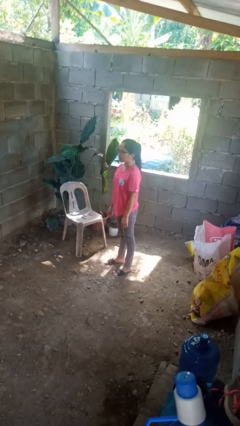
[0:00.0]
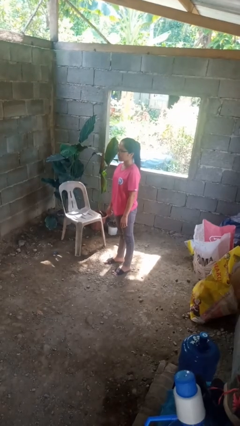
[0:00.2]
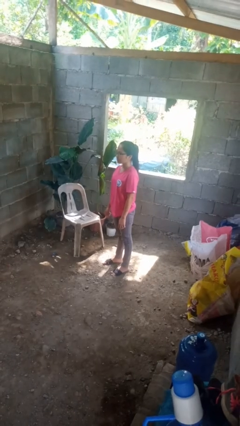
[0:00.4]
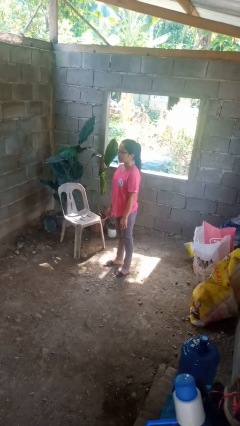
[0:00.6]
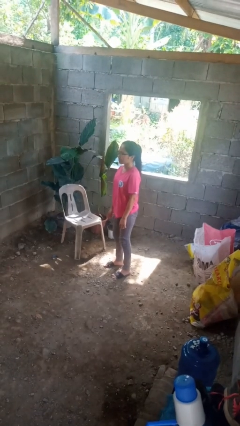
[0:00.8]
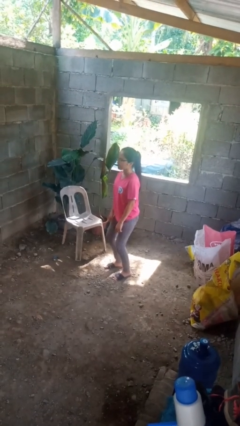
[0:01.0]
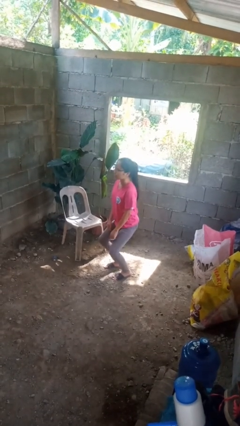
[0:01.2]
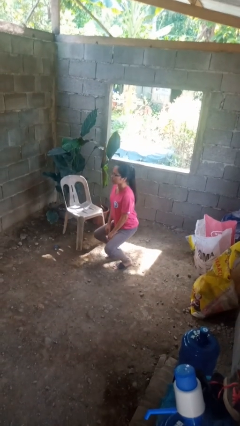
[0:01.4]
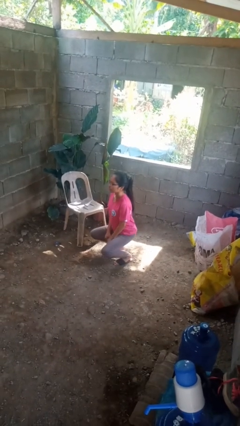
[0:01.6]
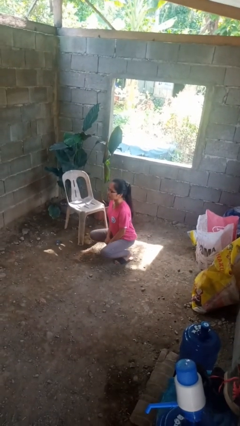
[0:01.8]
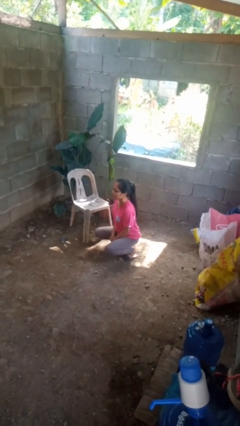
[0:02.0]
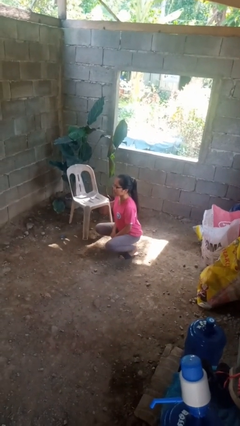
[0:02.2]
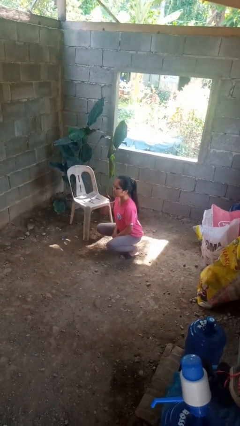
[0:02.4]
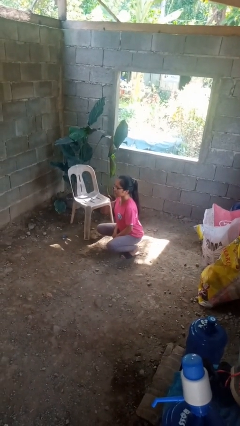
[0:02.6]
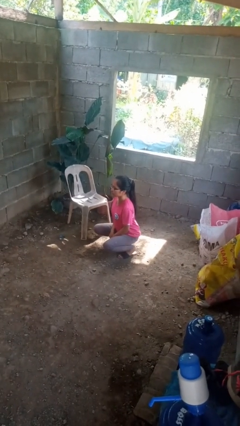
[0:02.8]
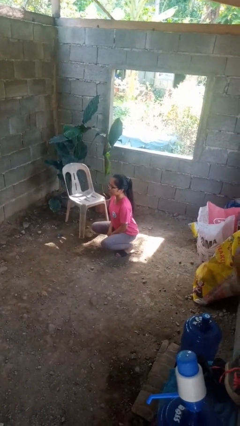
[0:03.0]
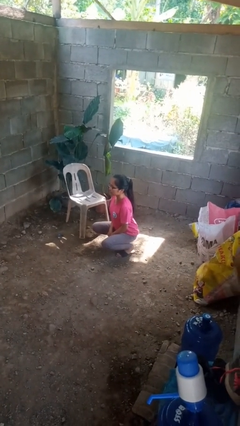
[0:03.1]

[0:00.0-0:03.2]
person squats

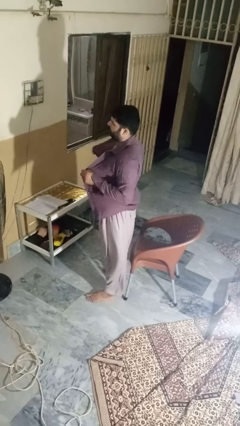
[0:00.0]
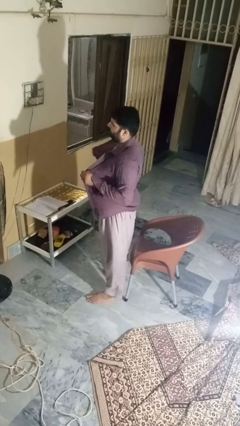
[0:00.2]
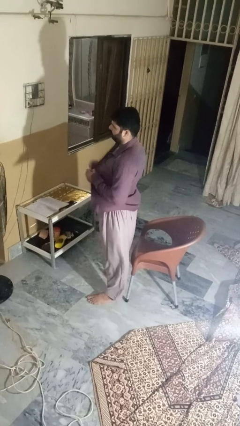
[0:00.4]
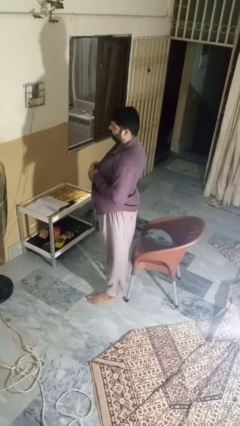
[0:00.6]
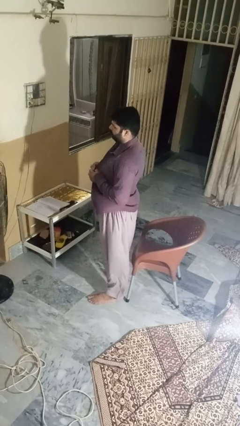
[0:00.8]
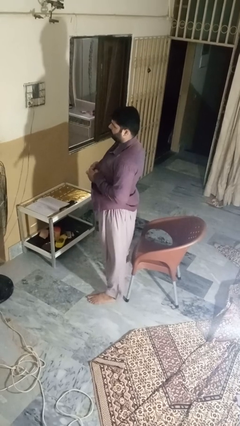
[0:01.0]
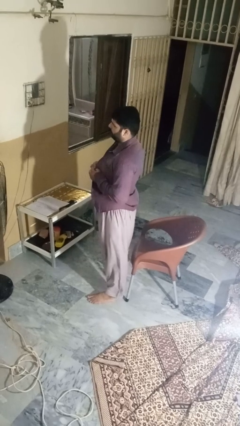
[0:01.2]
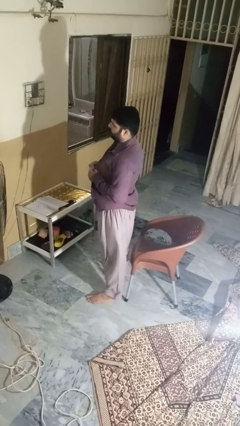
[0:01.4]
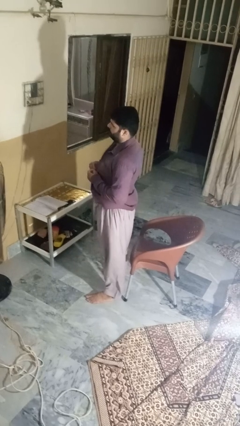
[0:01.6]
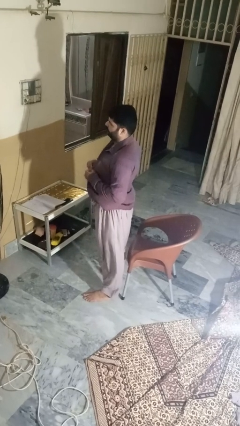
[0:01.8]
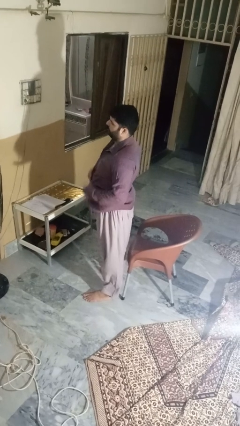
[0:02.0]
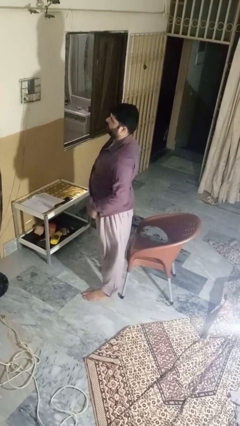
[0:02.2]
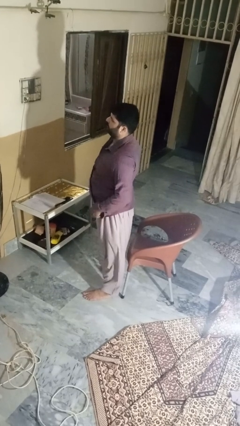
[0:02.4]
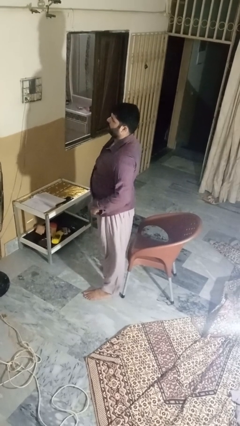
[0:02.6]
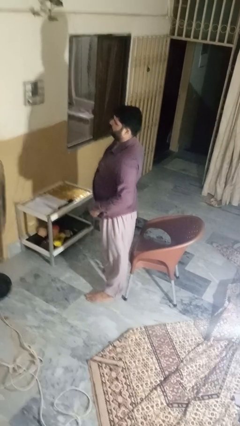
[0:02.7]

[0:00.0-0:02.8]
person buttons shirt

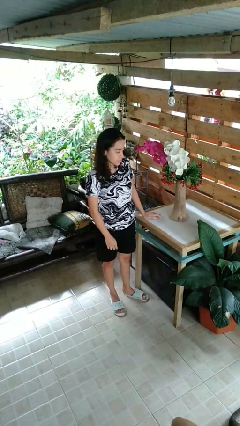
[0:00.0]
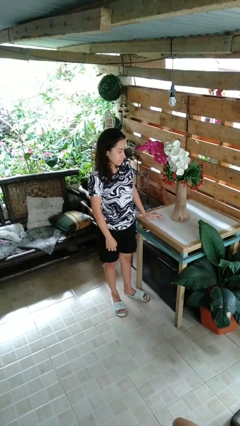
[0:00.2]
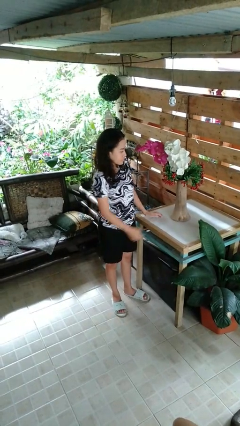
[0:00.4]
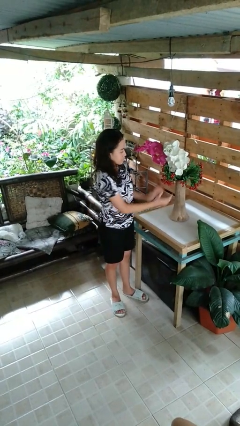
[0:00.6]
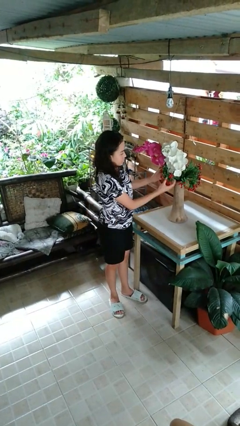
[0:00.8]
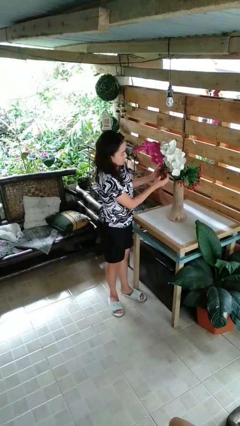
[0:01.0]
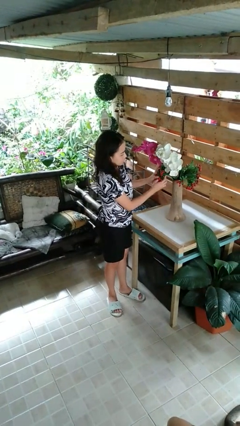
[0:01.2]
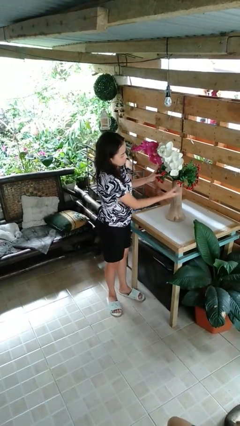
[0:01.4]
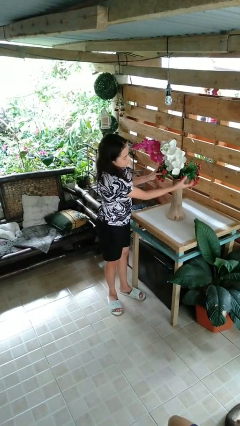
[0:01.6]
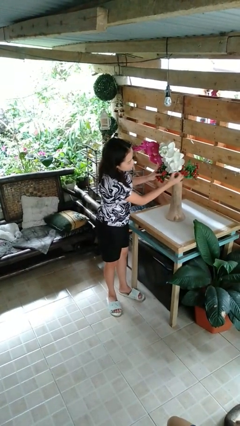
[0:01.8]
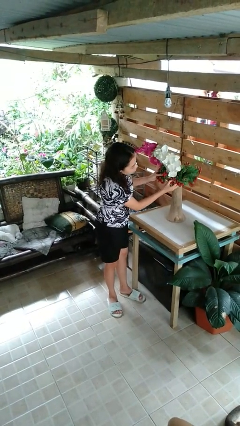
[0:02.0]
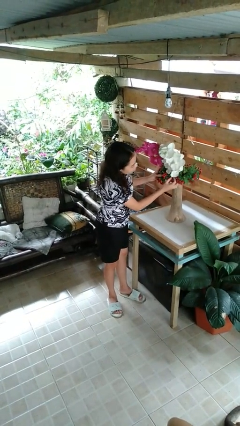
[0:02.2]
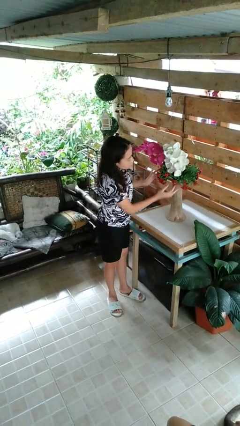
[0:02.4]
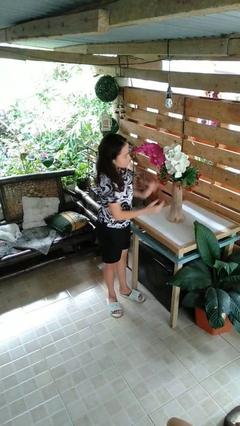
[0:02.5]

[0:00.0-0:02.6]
person arranges flowers in vase

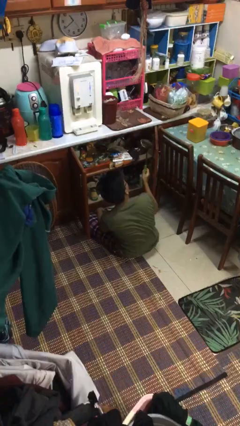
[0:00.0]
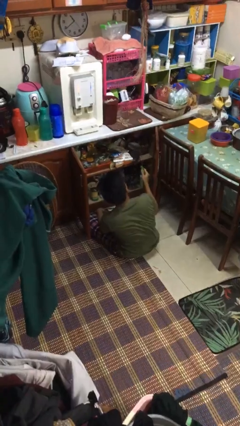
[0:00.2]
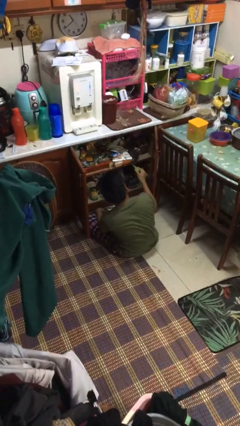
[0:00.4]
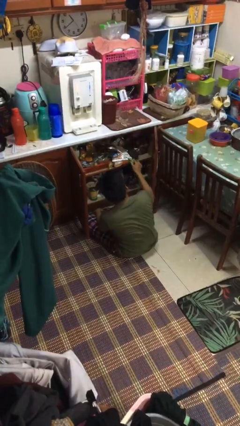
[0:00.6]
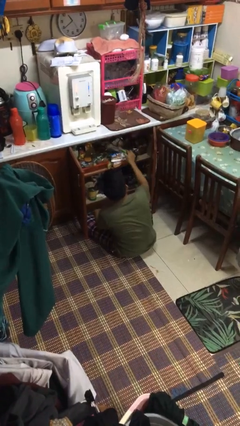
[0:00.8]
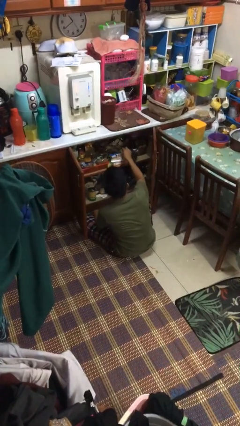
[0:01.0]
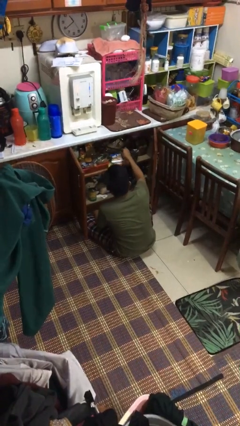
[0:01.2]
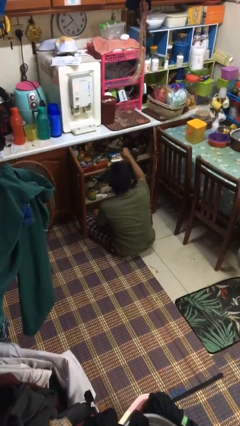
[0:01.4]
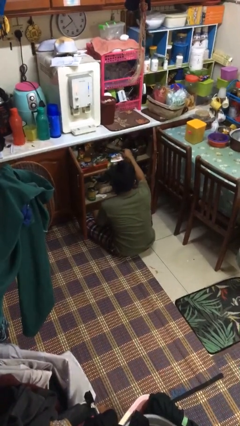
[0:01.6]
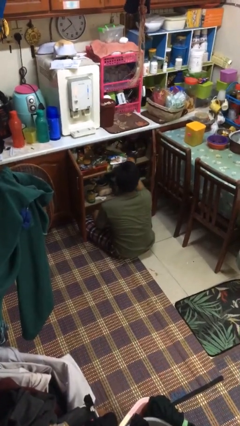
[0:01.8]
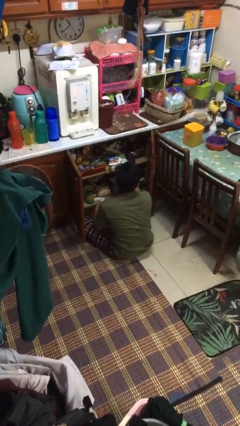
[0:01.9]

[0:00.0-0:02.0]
person puts object into kitchen drawer

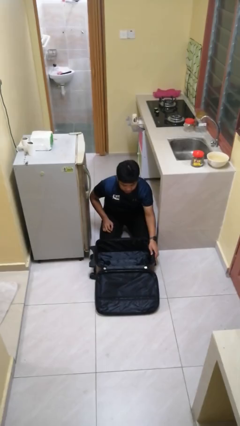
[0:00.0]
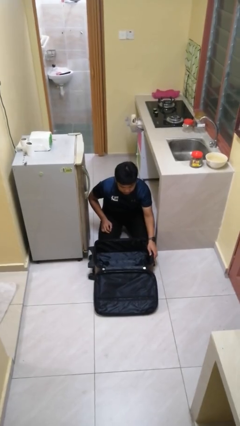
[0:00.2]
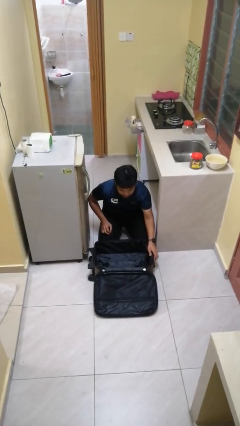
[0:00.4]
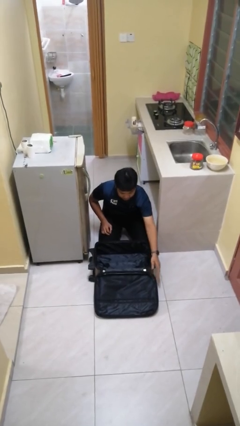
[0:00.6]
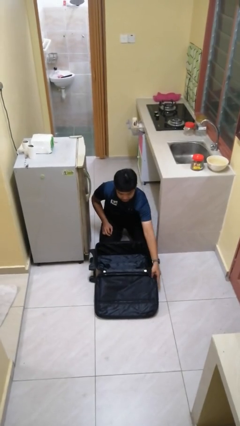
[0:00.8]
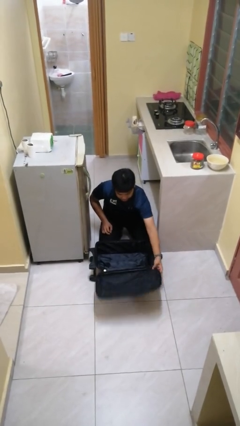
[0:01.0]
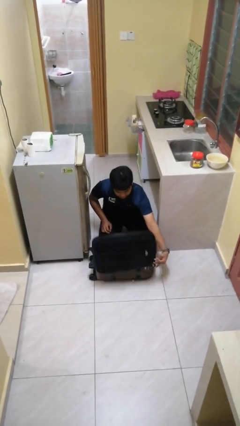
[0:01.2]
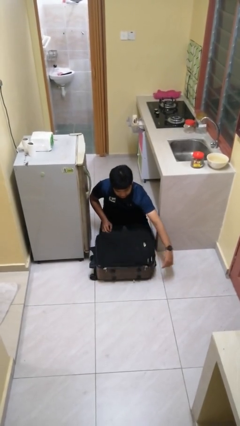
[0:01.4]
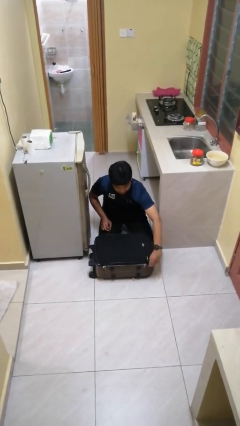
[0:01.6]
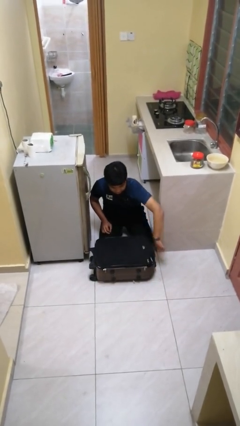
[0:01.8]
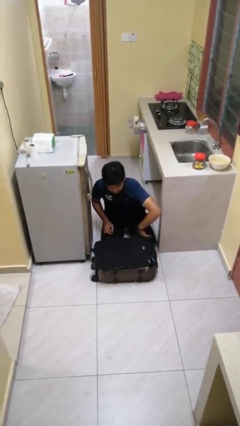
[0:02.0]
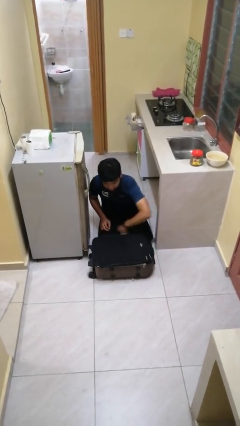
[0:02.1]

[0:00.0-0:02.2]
person closes suitcase

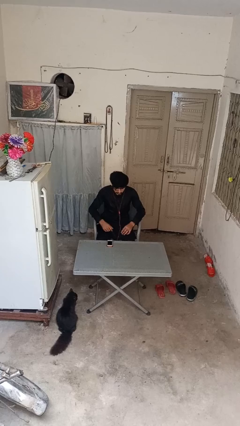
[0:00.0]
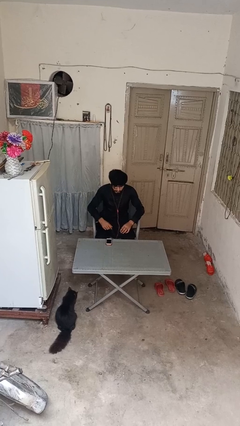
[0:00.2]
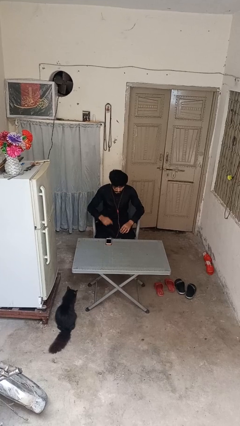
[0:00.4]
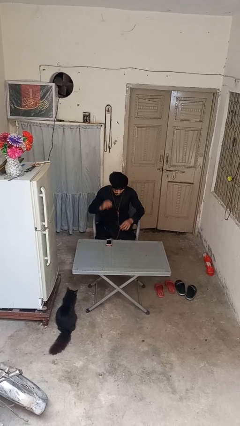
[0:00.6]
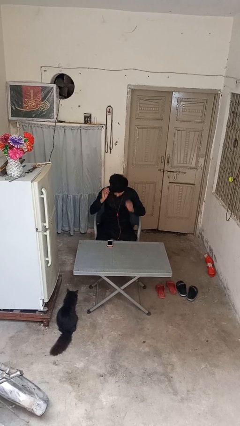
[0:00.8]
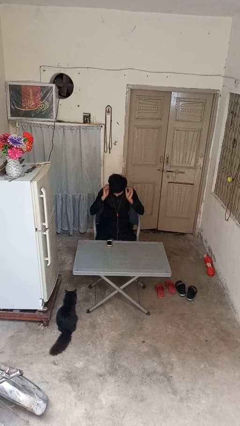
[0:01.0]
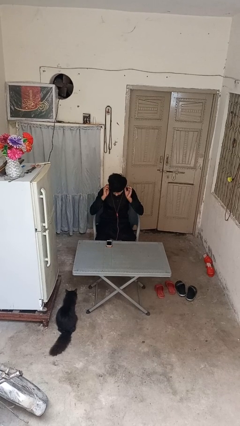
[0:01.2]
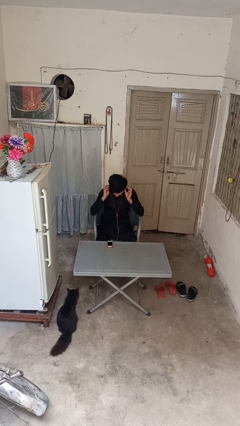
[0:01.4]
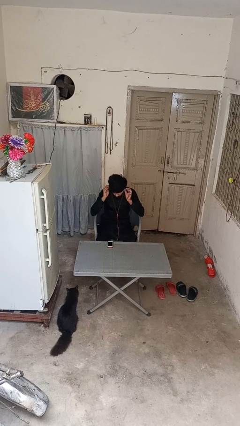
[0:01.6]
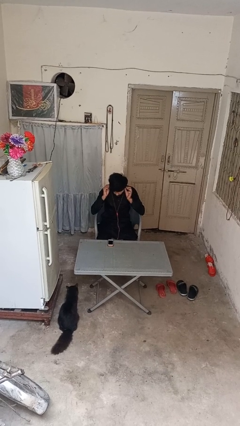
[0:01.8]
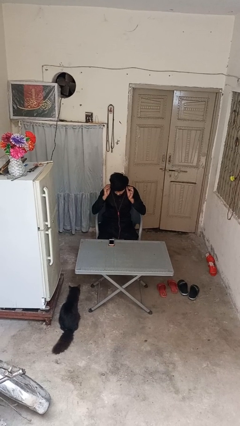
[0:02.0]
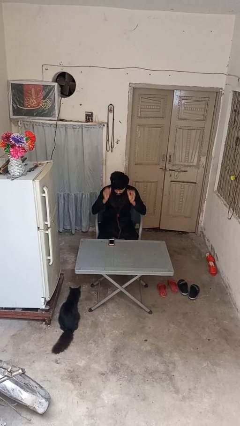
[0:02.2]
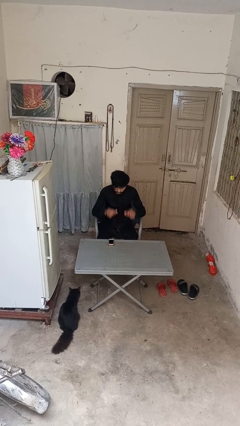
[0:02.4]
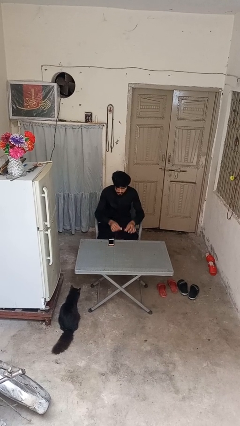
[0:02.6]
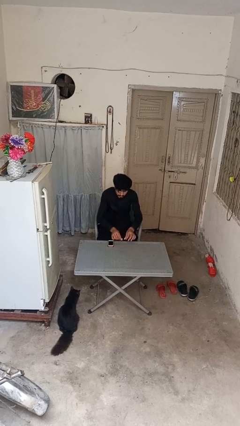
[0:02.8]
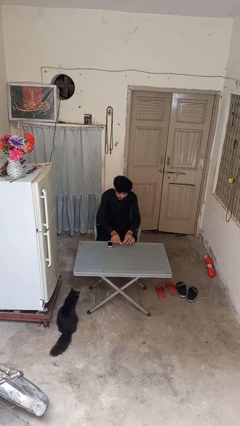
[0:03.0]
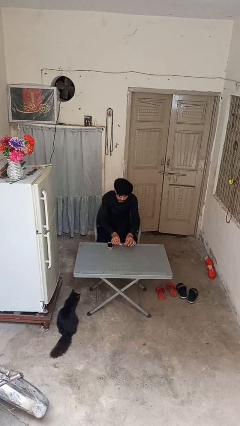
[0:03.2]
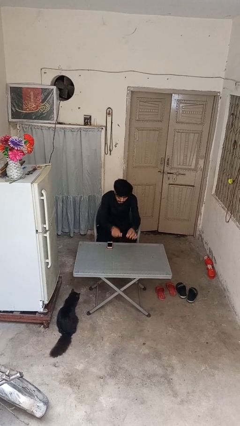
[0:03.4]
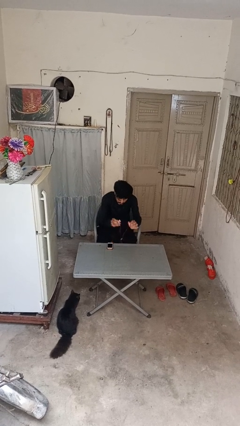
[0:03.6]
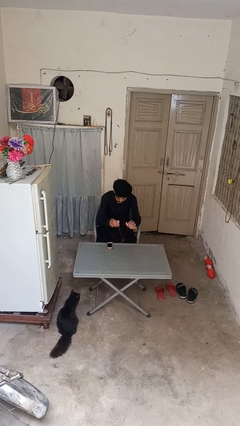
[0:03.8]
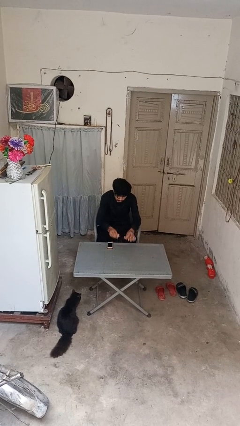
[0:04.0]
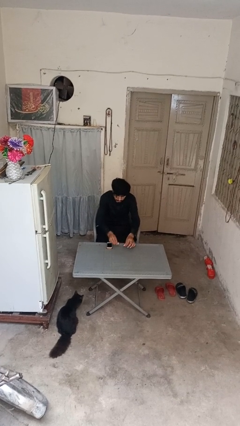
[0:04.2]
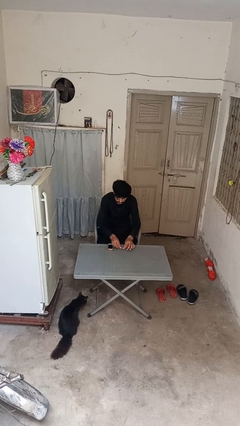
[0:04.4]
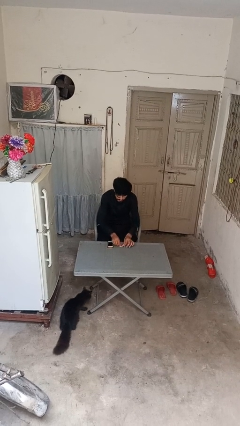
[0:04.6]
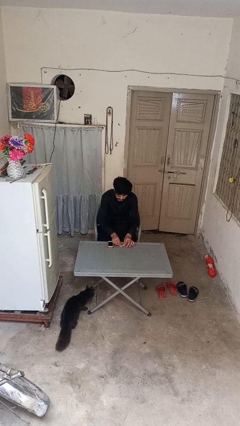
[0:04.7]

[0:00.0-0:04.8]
person takes off headphones
